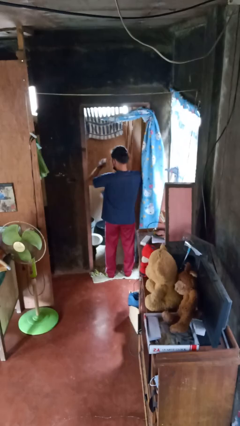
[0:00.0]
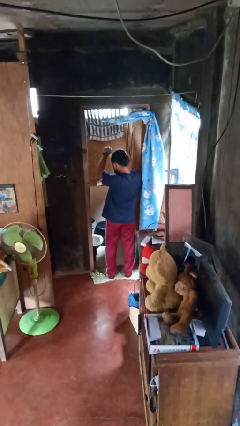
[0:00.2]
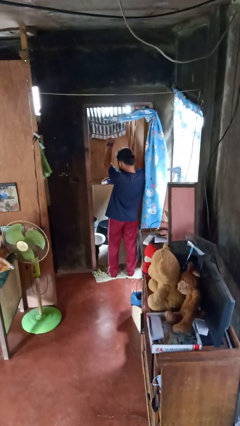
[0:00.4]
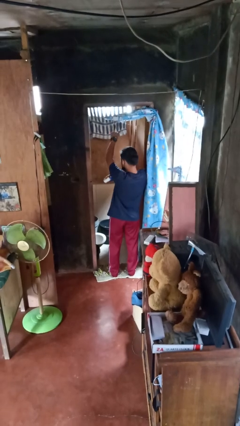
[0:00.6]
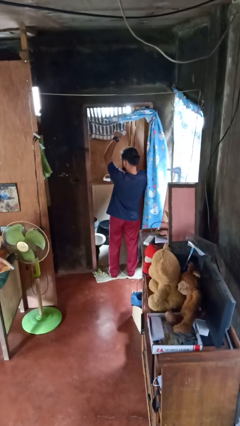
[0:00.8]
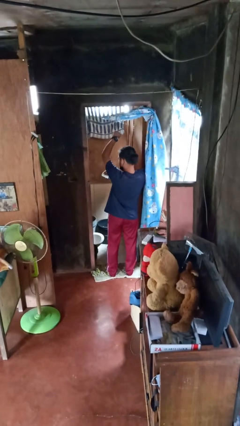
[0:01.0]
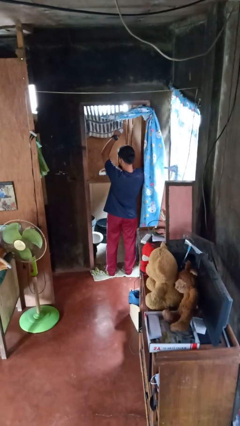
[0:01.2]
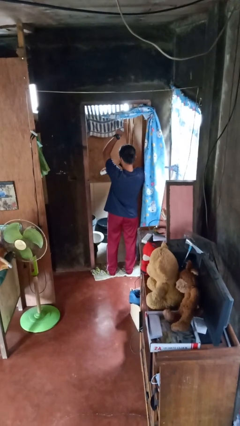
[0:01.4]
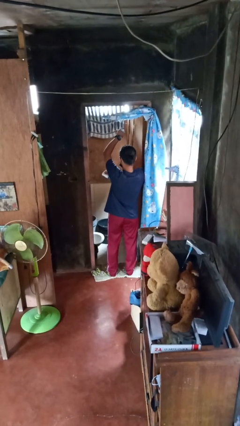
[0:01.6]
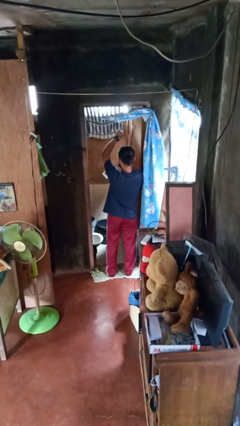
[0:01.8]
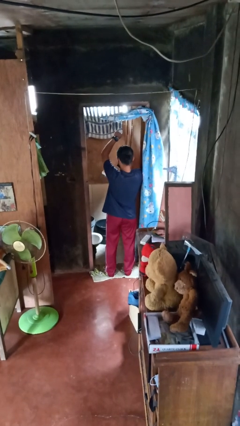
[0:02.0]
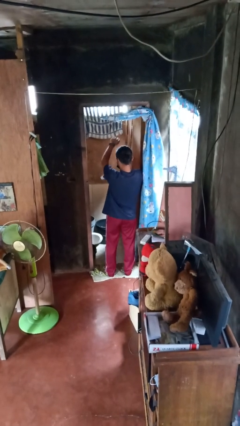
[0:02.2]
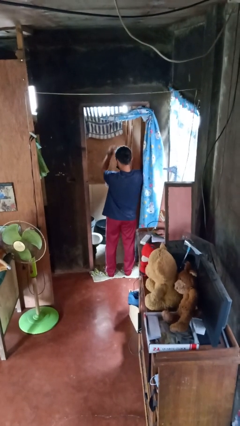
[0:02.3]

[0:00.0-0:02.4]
person applies deodorant

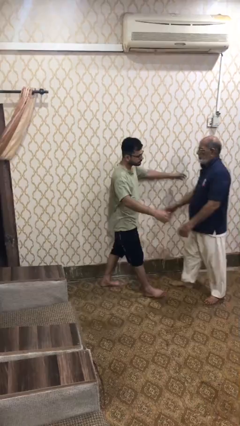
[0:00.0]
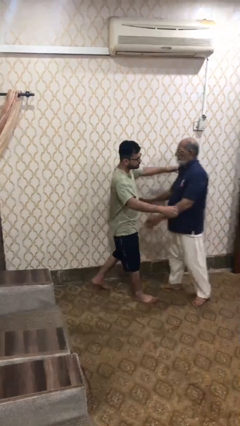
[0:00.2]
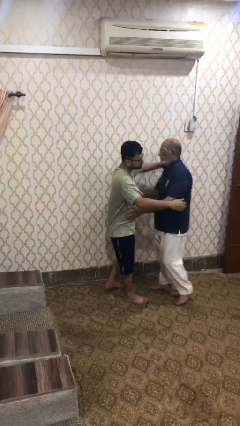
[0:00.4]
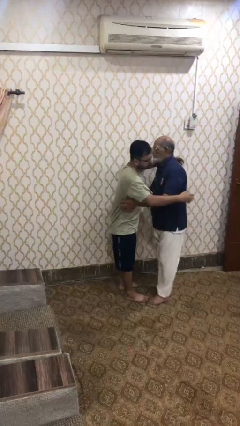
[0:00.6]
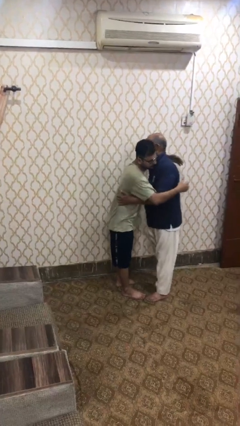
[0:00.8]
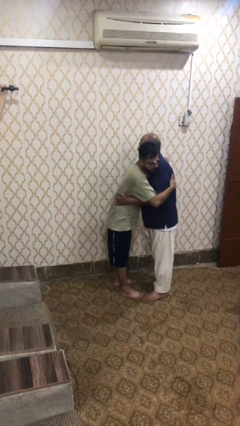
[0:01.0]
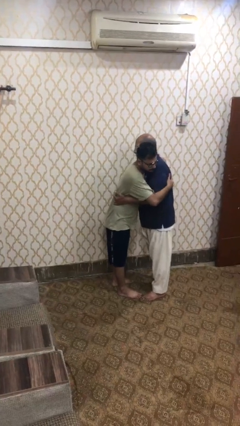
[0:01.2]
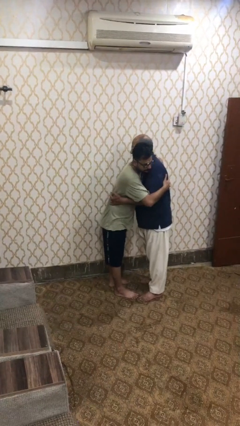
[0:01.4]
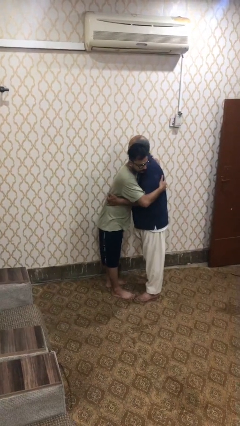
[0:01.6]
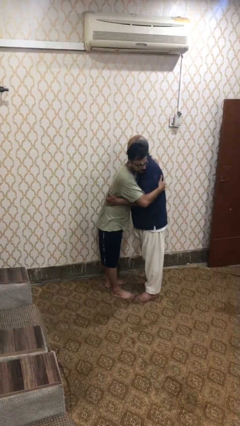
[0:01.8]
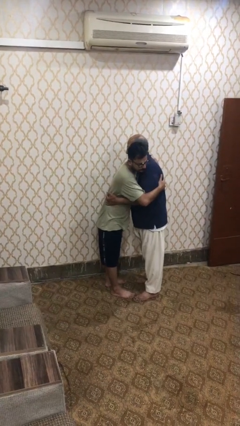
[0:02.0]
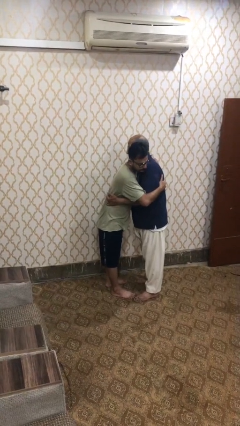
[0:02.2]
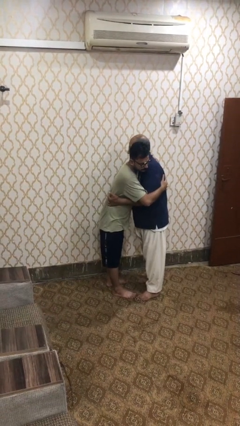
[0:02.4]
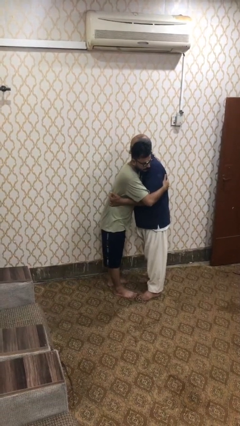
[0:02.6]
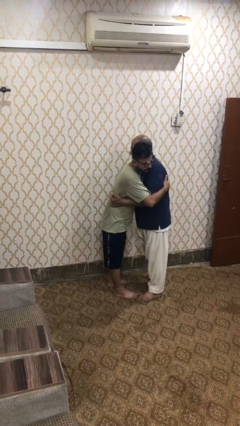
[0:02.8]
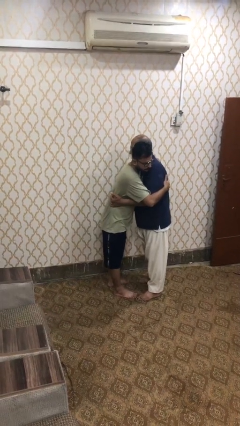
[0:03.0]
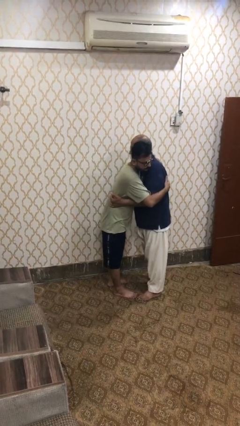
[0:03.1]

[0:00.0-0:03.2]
person embraces person

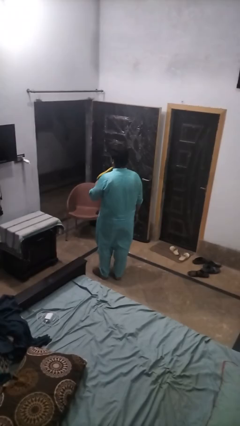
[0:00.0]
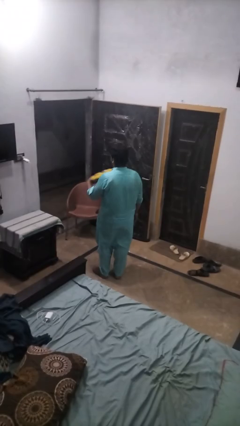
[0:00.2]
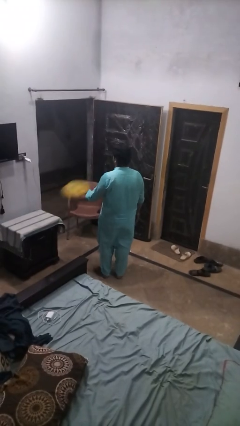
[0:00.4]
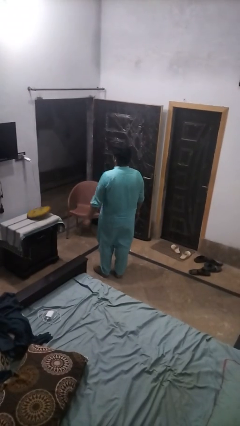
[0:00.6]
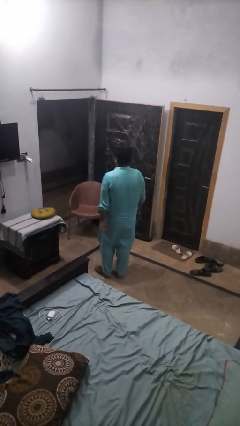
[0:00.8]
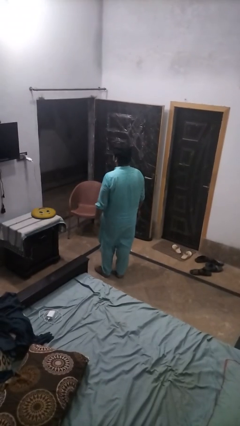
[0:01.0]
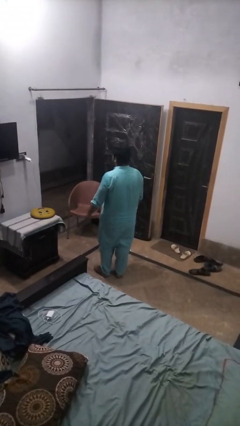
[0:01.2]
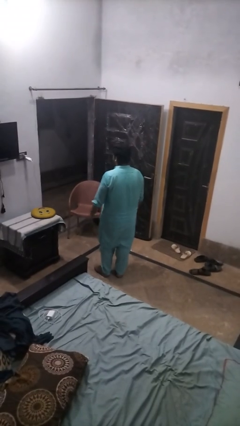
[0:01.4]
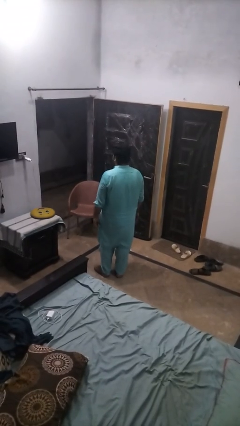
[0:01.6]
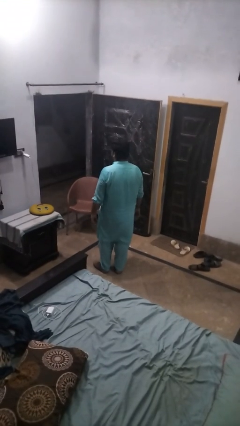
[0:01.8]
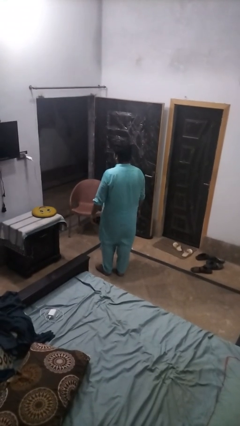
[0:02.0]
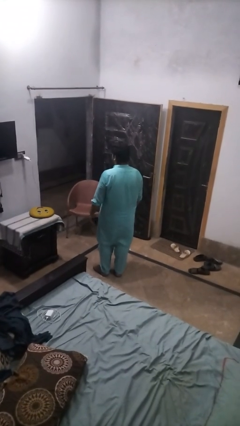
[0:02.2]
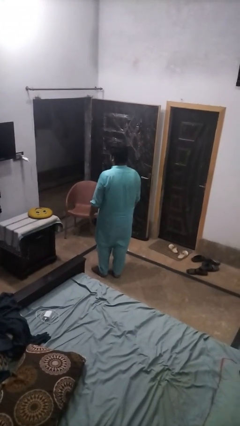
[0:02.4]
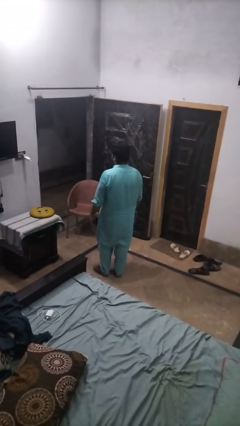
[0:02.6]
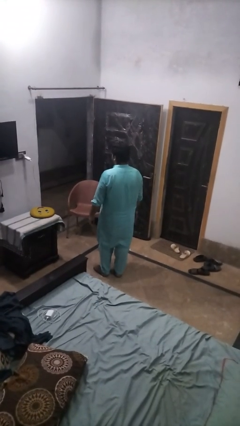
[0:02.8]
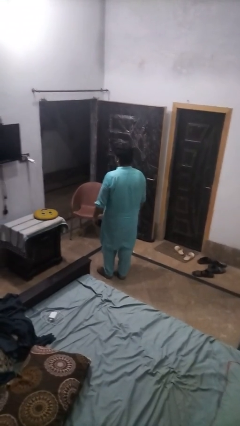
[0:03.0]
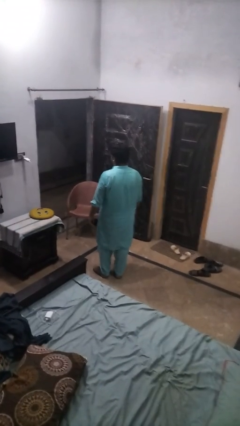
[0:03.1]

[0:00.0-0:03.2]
person throws object on table

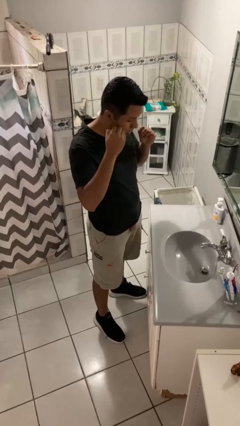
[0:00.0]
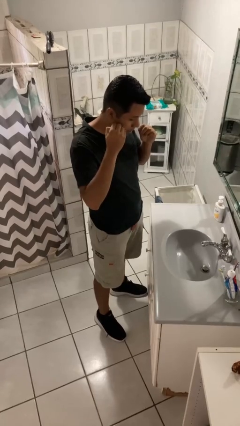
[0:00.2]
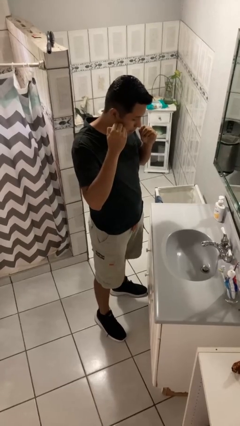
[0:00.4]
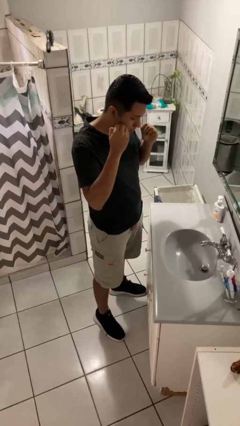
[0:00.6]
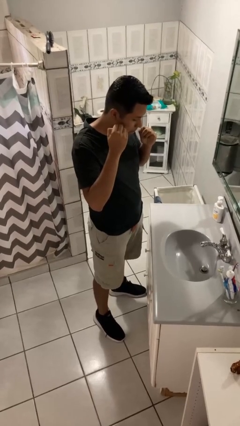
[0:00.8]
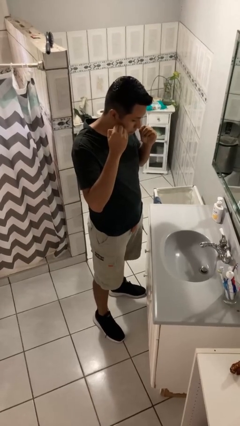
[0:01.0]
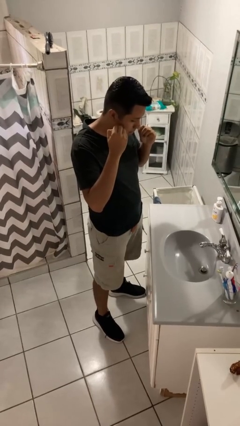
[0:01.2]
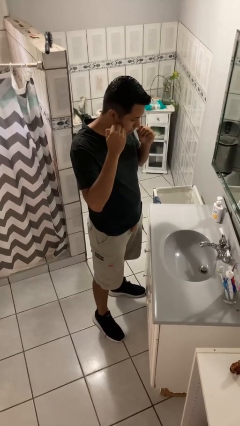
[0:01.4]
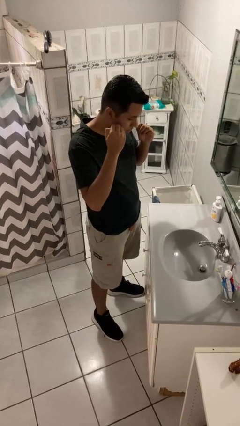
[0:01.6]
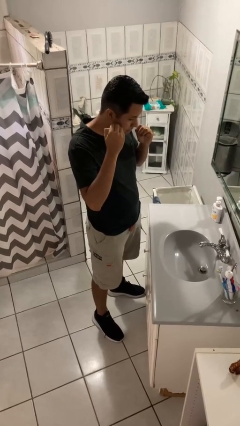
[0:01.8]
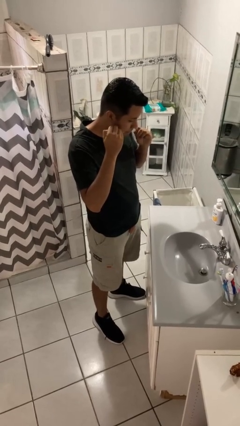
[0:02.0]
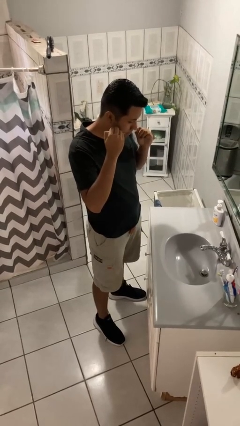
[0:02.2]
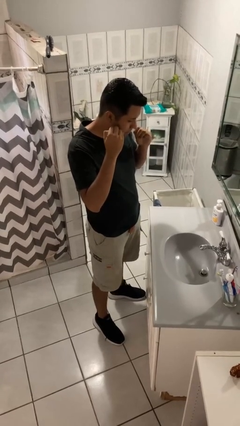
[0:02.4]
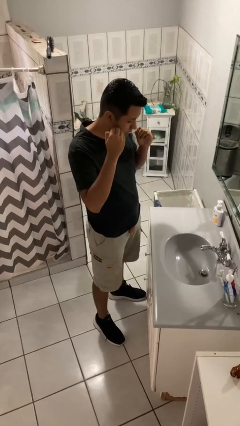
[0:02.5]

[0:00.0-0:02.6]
person flosses

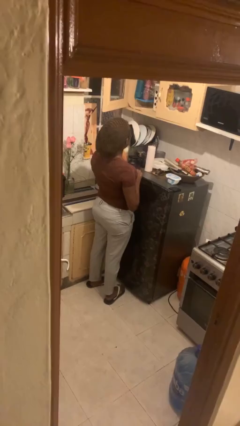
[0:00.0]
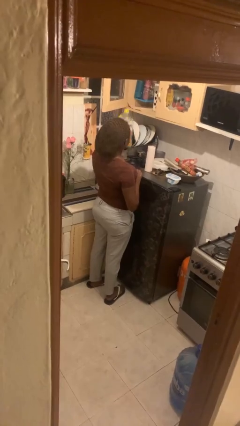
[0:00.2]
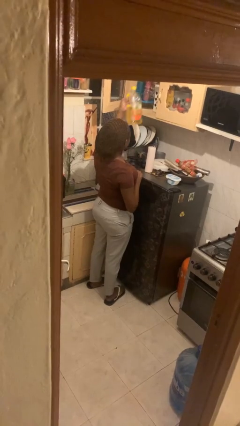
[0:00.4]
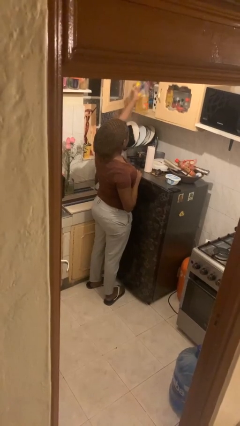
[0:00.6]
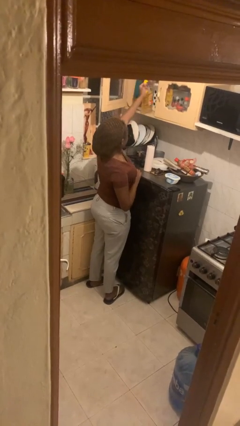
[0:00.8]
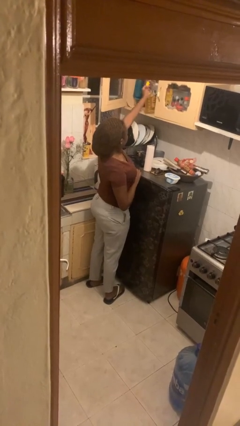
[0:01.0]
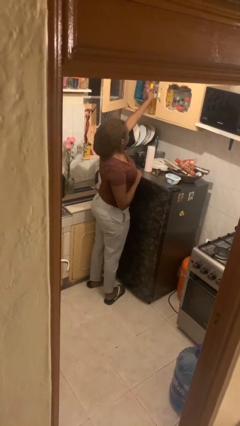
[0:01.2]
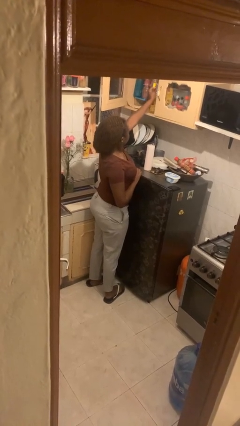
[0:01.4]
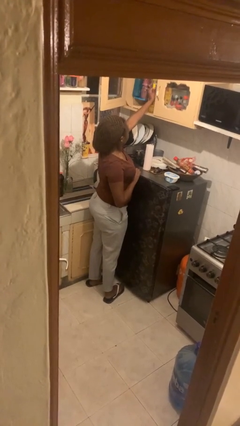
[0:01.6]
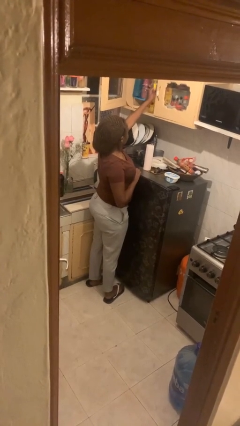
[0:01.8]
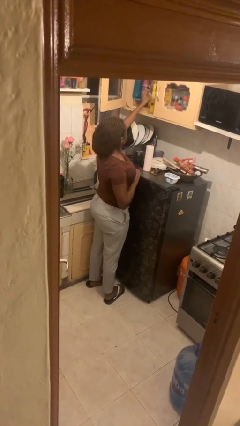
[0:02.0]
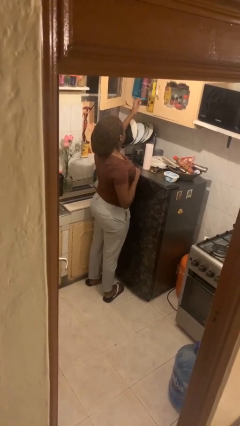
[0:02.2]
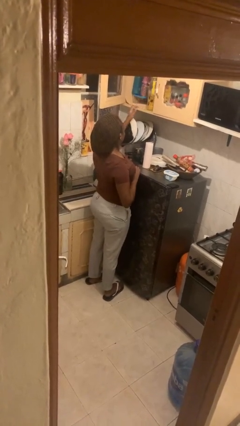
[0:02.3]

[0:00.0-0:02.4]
person puts down object into cabinet

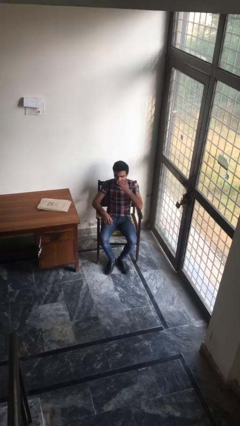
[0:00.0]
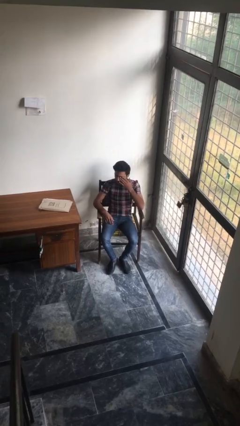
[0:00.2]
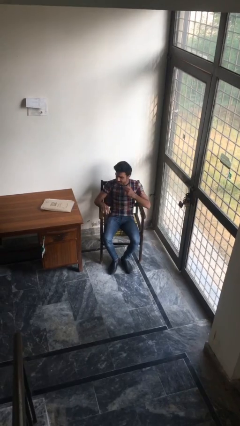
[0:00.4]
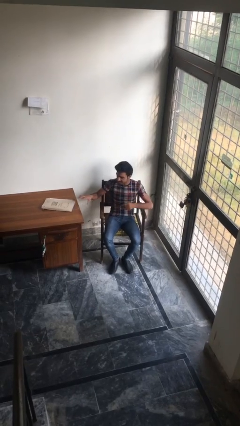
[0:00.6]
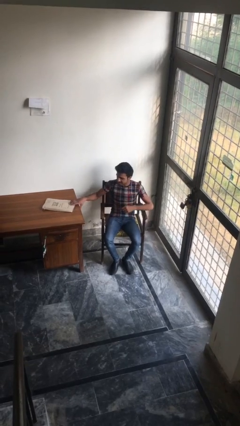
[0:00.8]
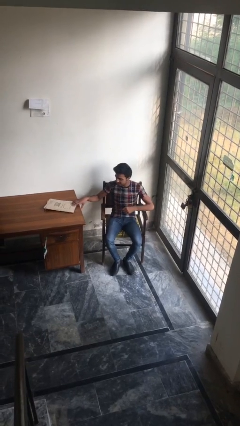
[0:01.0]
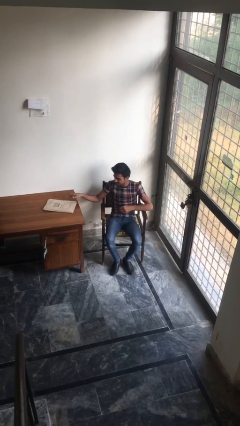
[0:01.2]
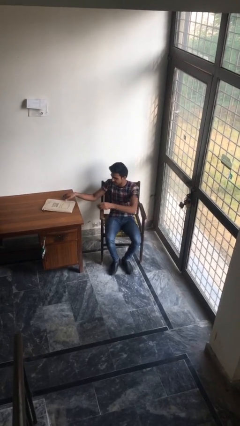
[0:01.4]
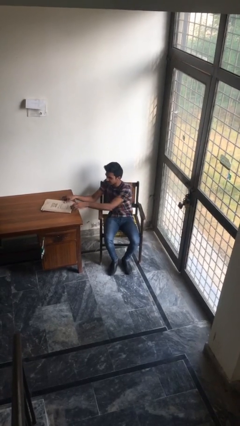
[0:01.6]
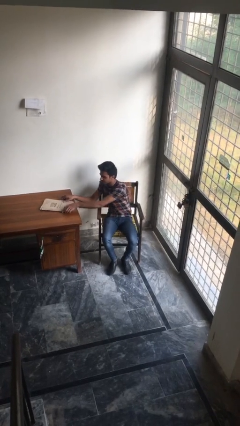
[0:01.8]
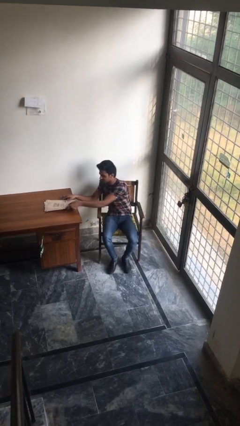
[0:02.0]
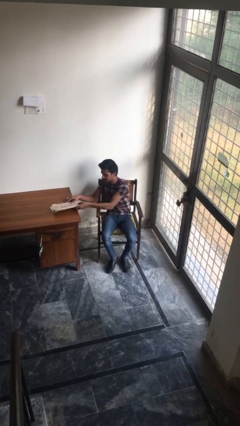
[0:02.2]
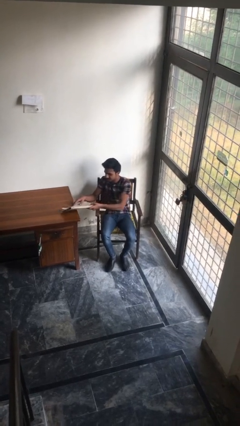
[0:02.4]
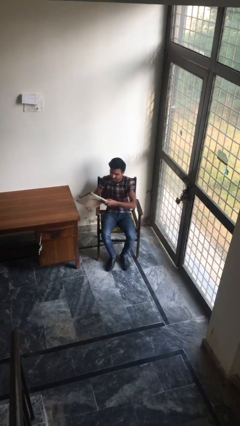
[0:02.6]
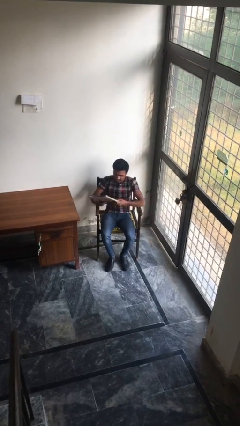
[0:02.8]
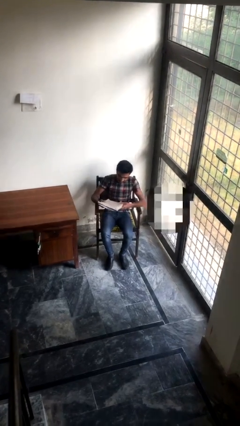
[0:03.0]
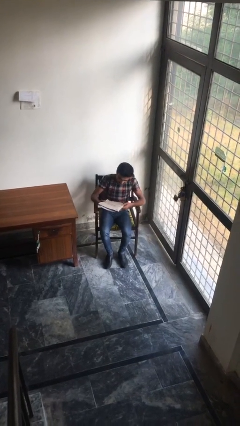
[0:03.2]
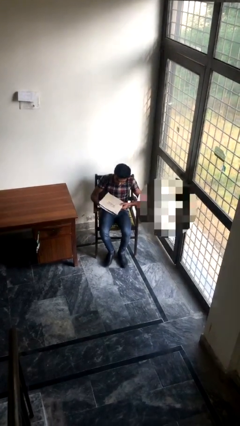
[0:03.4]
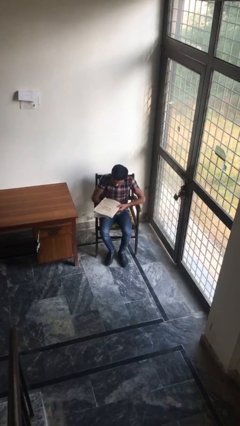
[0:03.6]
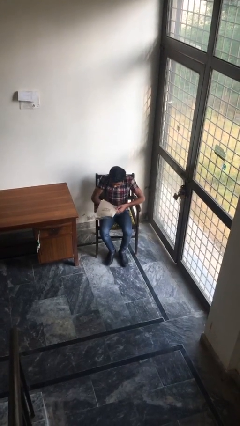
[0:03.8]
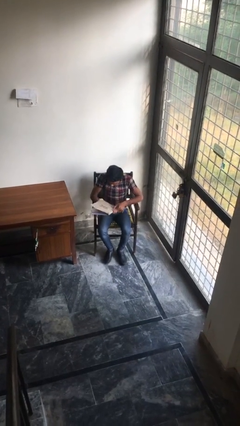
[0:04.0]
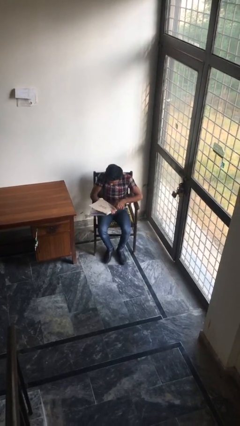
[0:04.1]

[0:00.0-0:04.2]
person picks up object from table
